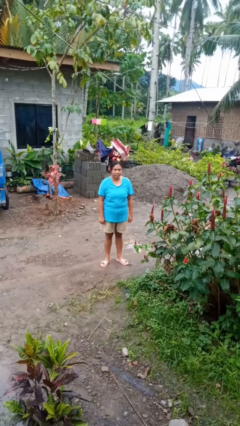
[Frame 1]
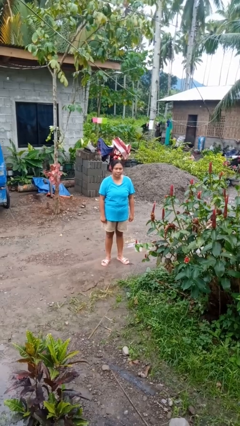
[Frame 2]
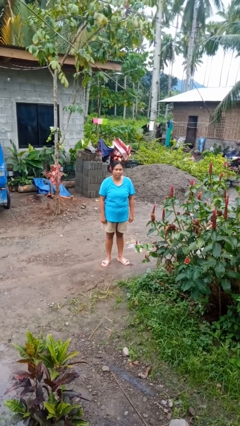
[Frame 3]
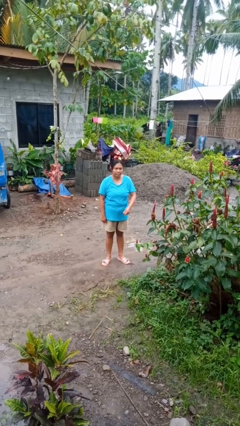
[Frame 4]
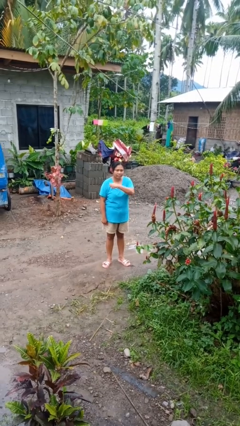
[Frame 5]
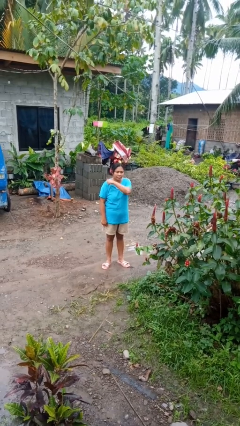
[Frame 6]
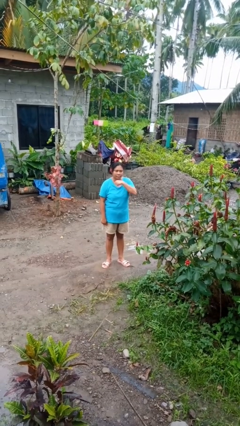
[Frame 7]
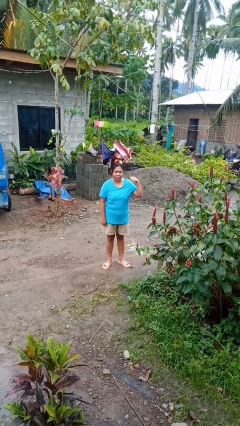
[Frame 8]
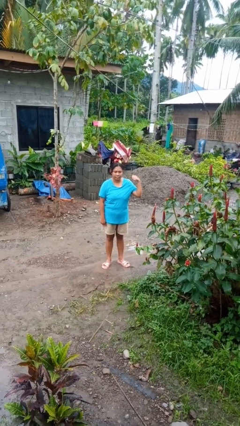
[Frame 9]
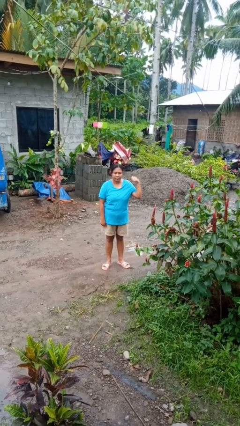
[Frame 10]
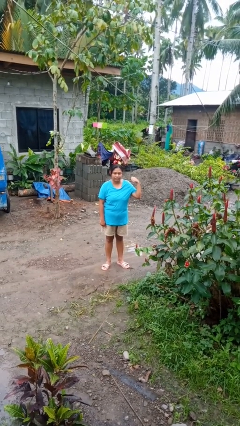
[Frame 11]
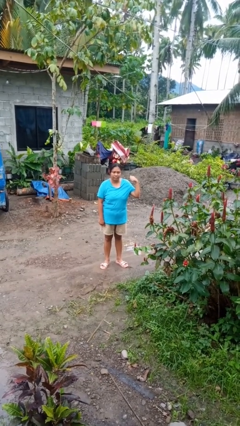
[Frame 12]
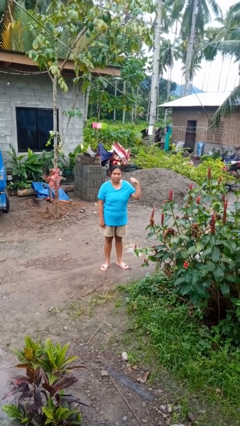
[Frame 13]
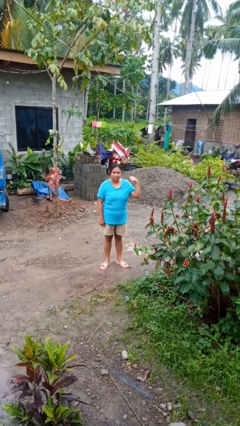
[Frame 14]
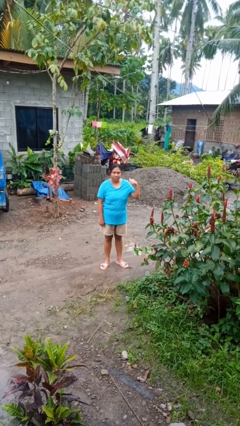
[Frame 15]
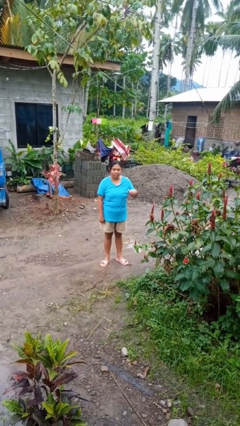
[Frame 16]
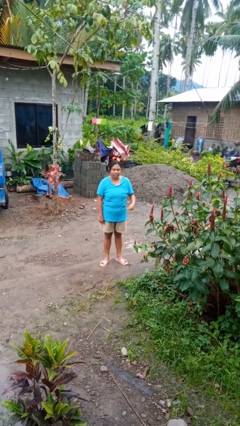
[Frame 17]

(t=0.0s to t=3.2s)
person gestures cut

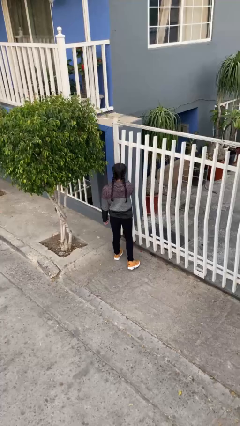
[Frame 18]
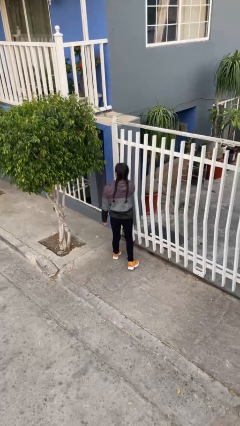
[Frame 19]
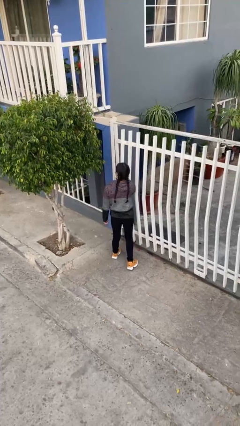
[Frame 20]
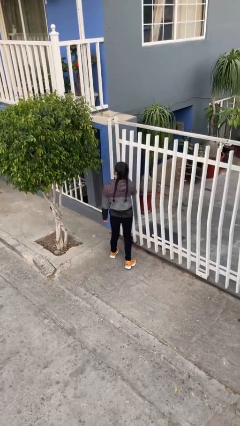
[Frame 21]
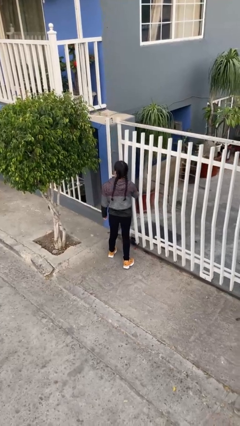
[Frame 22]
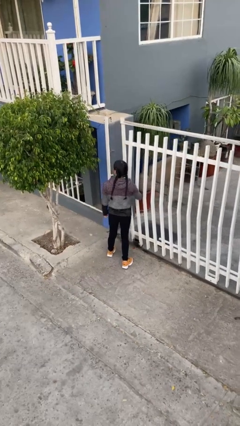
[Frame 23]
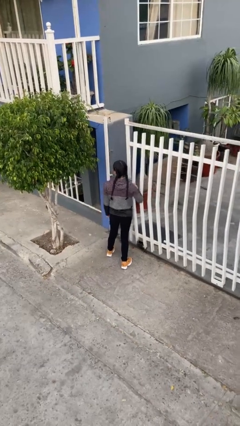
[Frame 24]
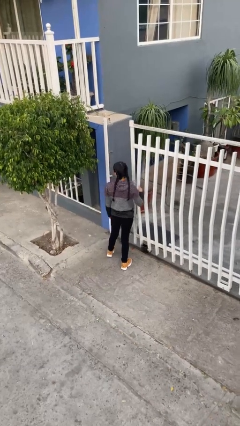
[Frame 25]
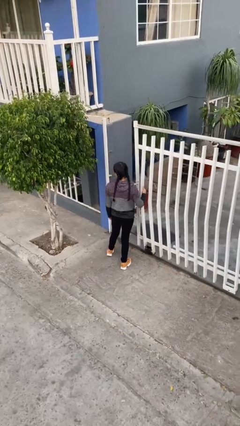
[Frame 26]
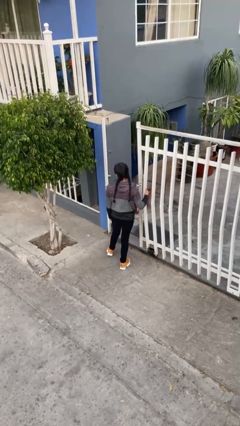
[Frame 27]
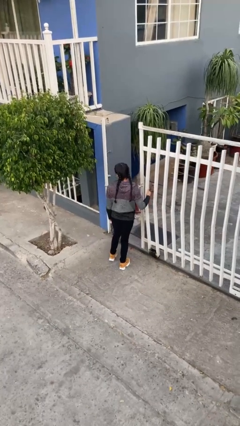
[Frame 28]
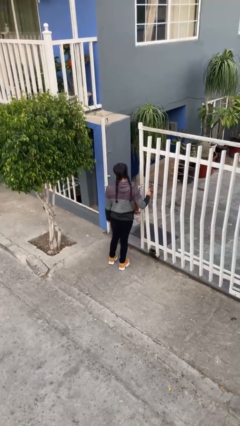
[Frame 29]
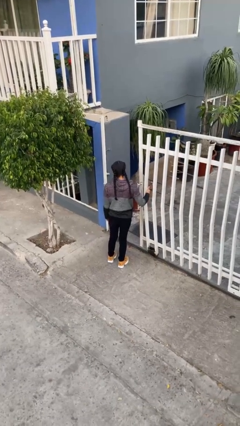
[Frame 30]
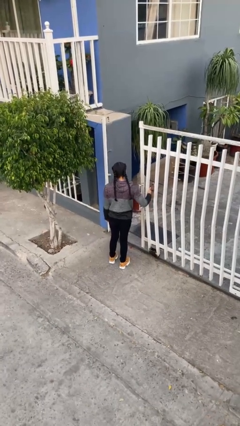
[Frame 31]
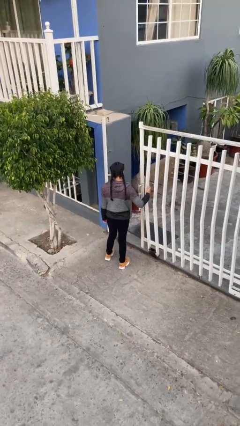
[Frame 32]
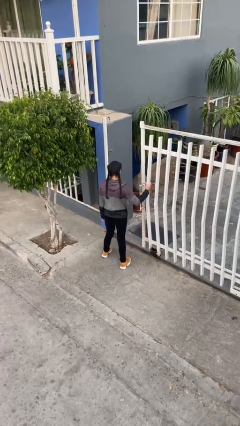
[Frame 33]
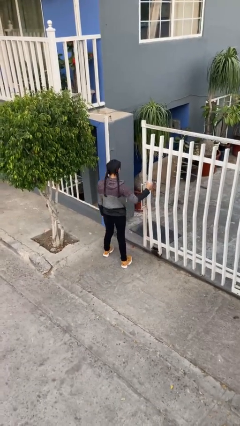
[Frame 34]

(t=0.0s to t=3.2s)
person opens facility door

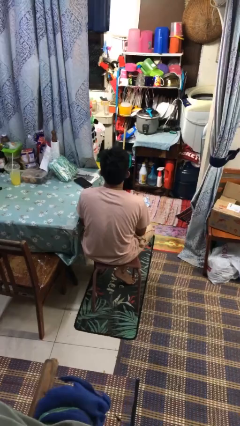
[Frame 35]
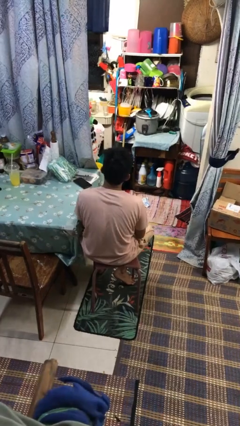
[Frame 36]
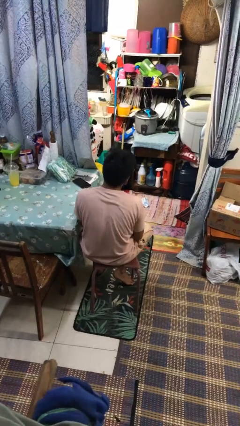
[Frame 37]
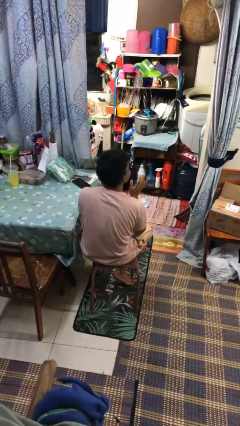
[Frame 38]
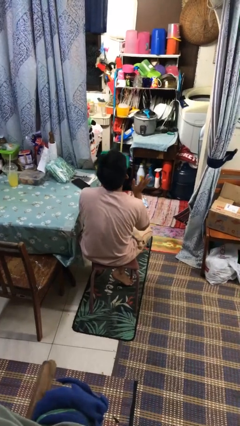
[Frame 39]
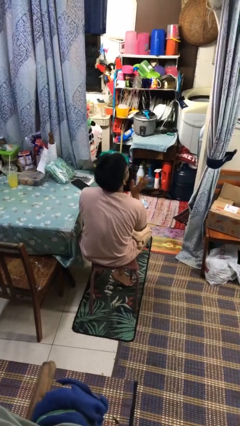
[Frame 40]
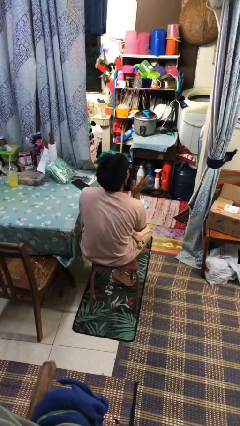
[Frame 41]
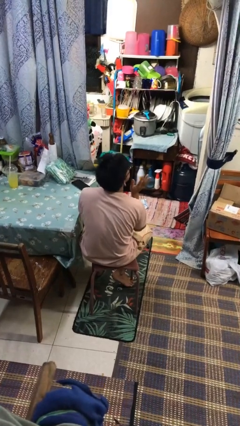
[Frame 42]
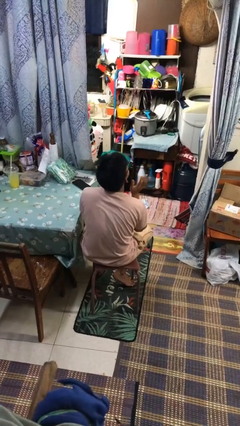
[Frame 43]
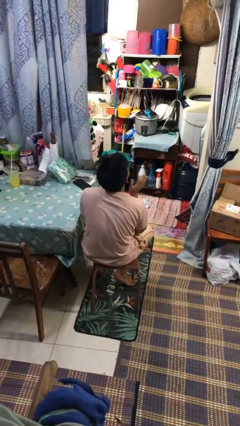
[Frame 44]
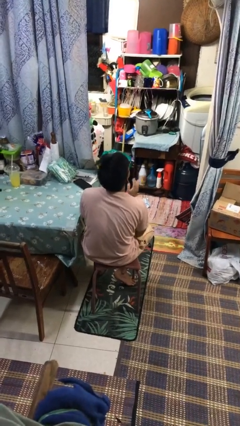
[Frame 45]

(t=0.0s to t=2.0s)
person sticks out tongue

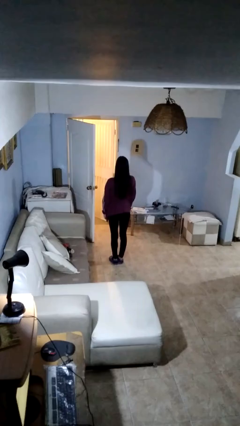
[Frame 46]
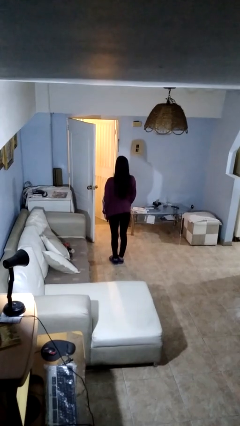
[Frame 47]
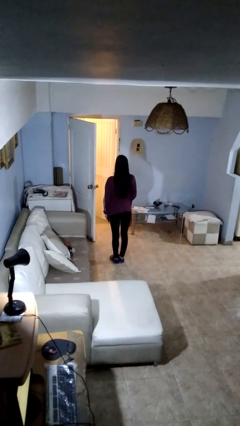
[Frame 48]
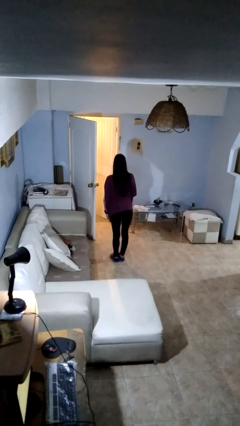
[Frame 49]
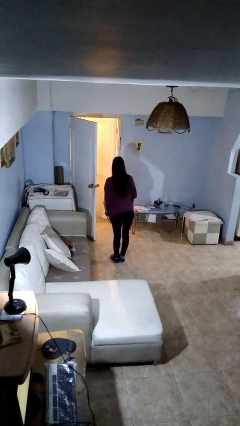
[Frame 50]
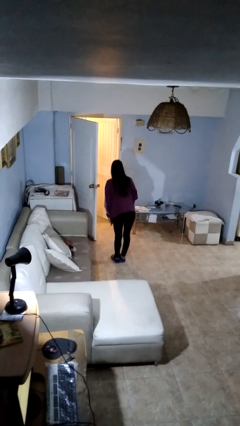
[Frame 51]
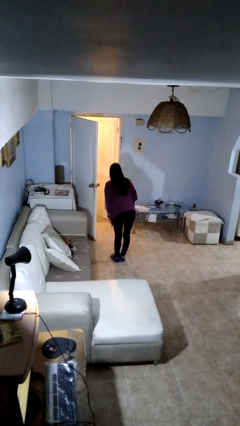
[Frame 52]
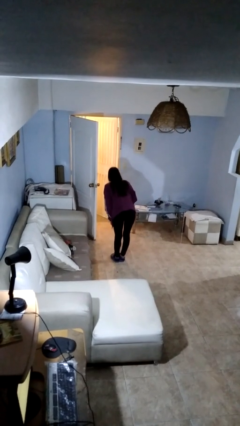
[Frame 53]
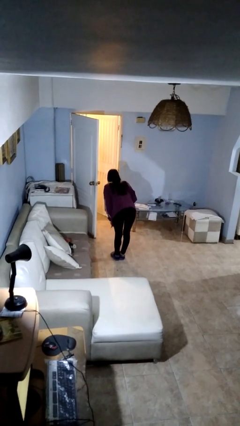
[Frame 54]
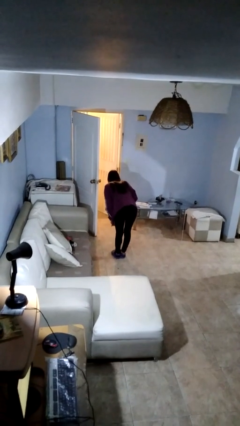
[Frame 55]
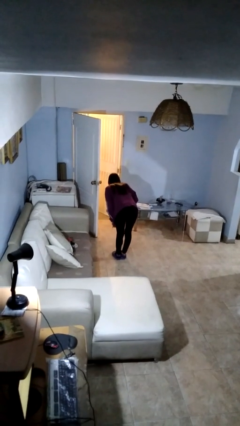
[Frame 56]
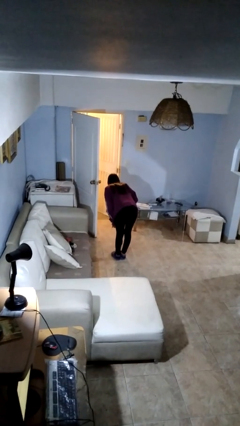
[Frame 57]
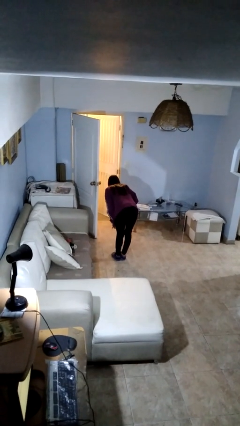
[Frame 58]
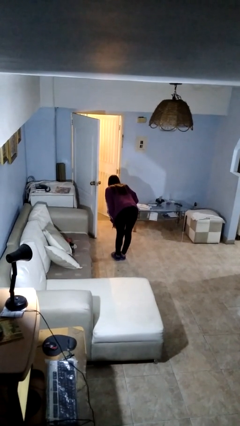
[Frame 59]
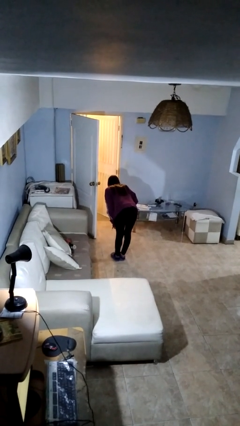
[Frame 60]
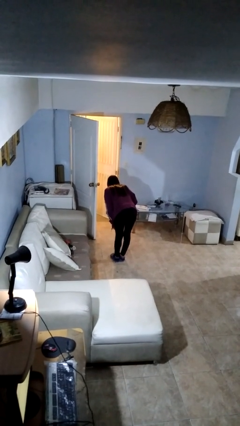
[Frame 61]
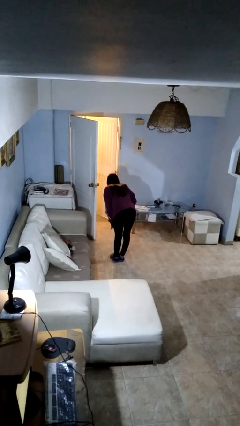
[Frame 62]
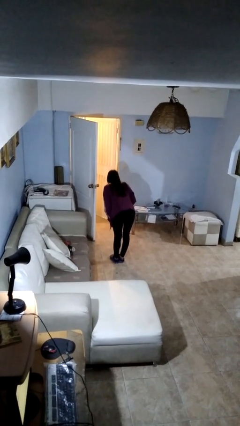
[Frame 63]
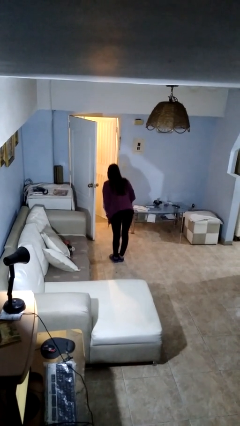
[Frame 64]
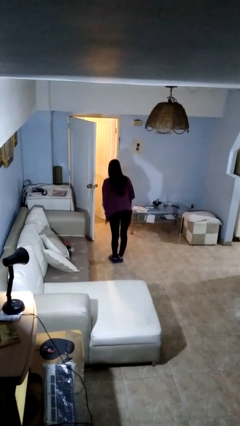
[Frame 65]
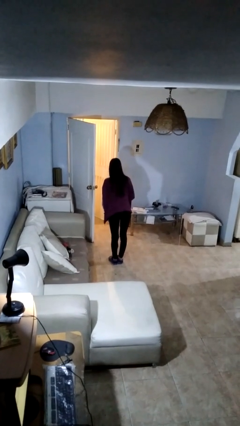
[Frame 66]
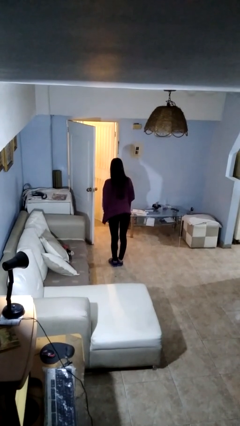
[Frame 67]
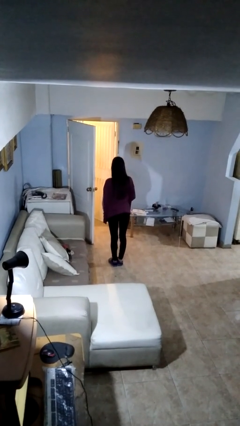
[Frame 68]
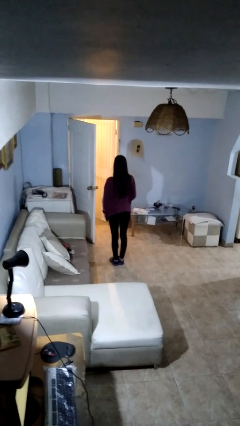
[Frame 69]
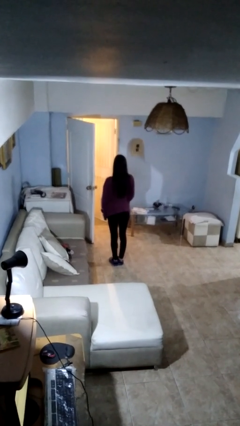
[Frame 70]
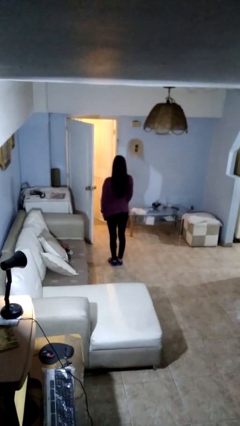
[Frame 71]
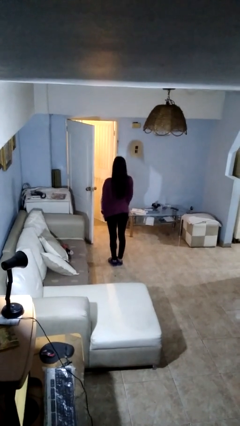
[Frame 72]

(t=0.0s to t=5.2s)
person bows

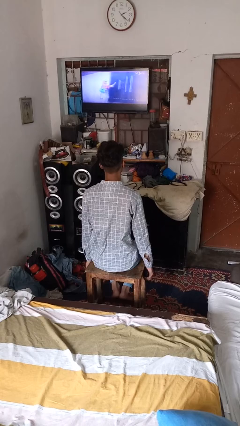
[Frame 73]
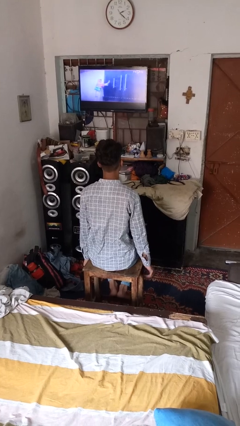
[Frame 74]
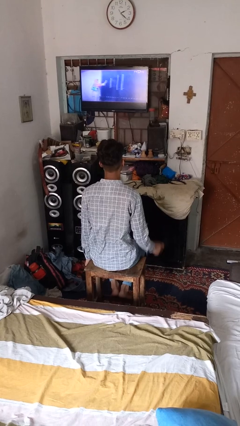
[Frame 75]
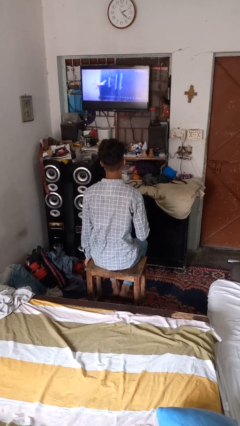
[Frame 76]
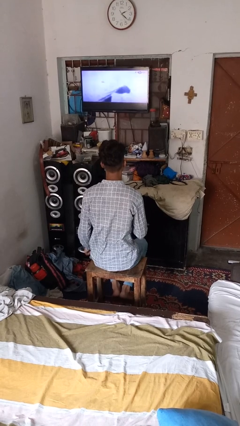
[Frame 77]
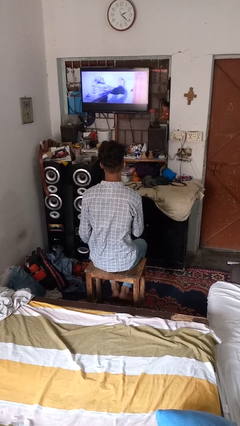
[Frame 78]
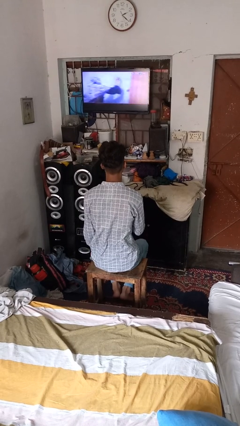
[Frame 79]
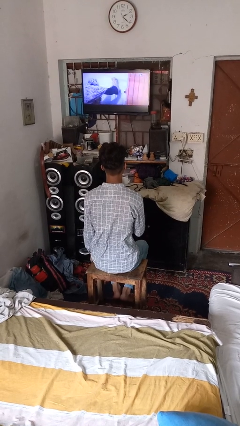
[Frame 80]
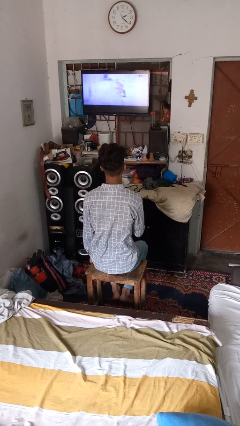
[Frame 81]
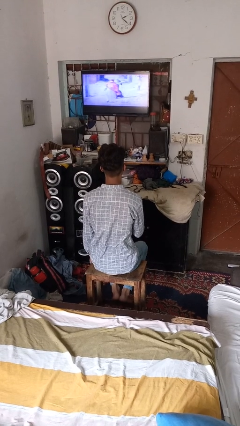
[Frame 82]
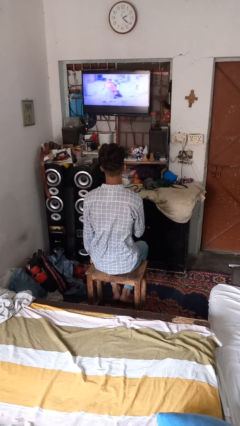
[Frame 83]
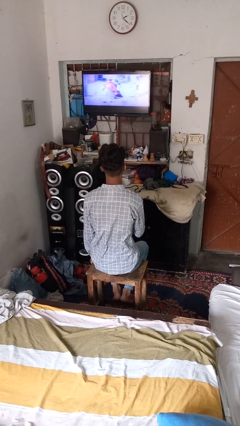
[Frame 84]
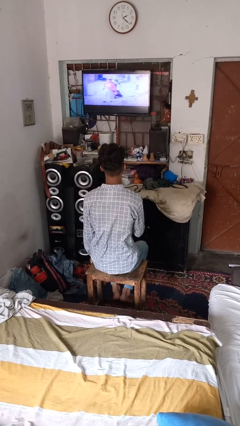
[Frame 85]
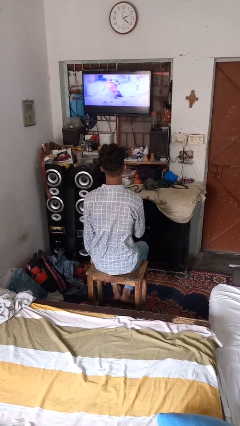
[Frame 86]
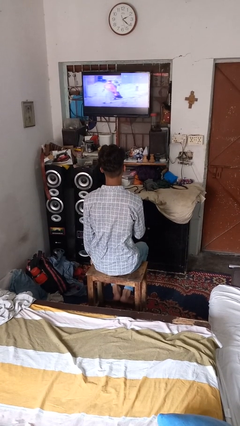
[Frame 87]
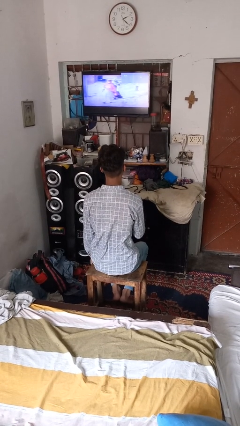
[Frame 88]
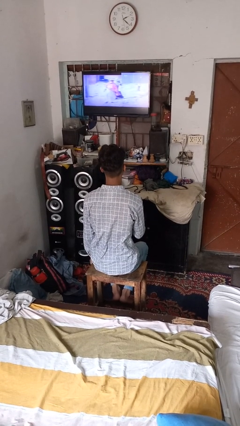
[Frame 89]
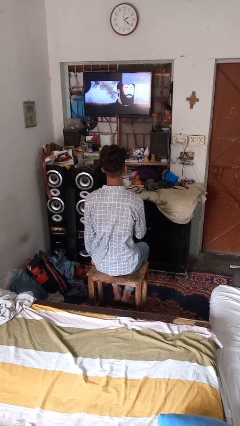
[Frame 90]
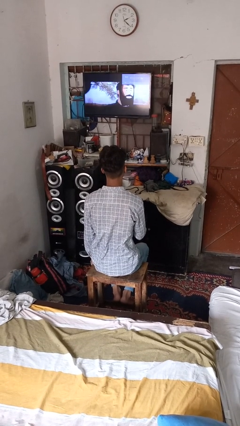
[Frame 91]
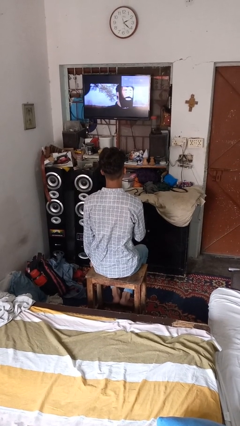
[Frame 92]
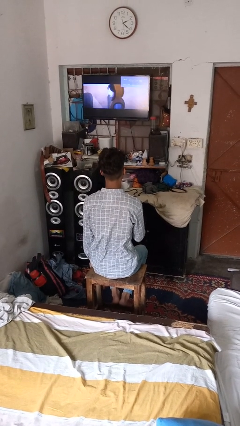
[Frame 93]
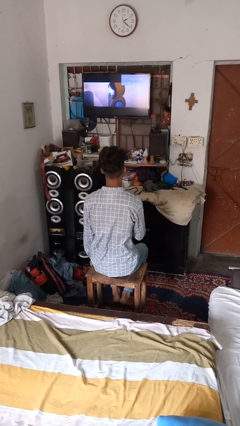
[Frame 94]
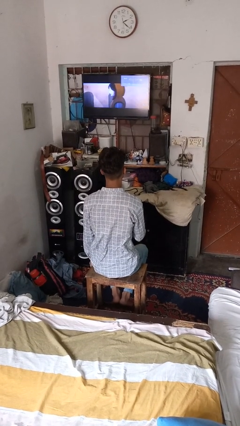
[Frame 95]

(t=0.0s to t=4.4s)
person uses television remote
